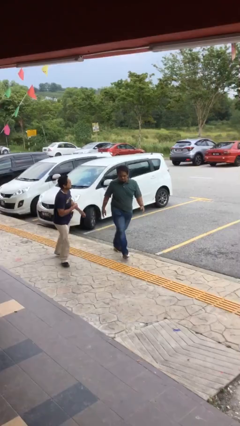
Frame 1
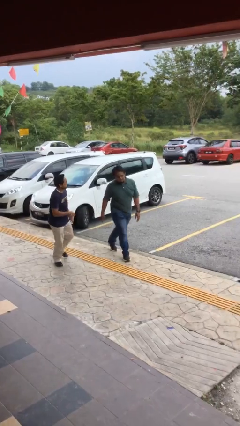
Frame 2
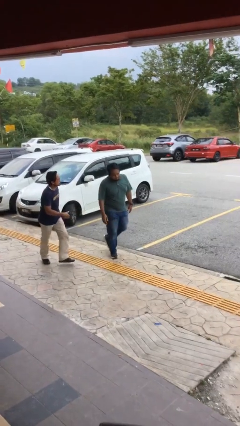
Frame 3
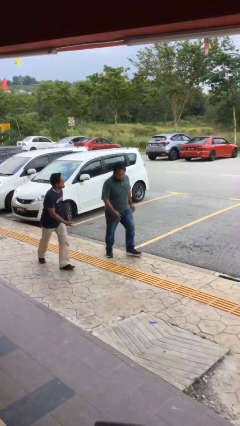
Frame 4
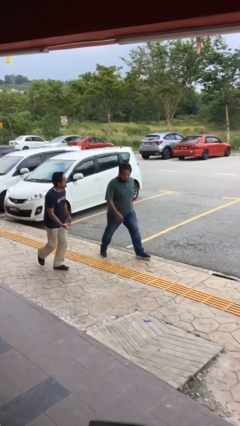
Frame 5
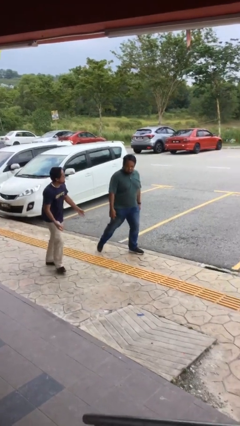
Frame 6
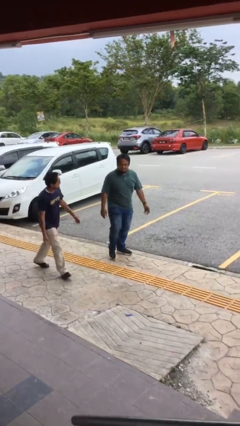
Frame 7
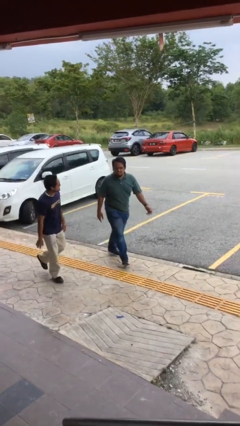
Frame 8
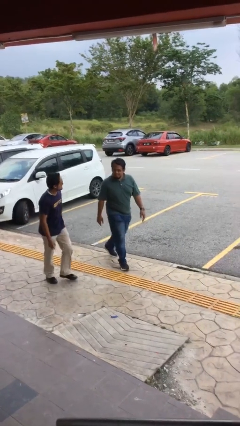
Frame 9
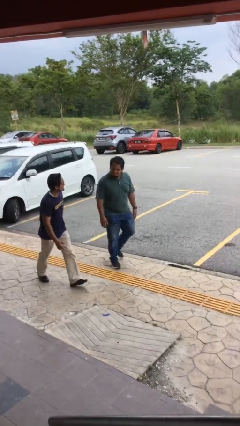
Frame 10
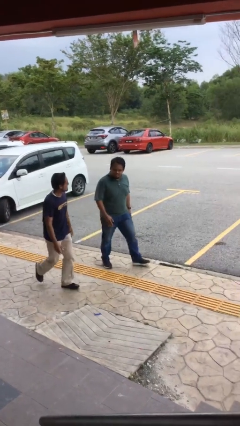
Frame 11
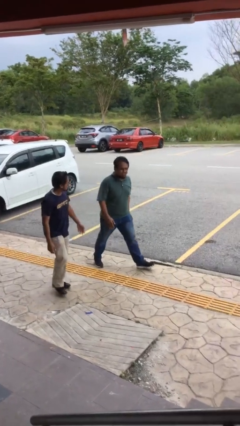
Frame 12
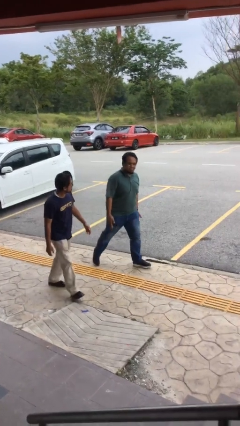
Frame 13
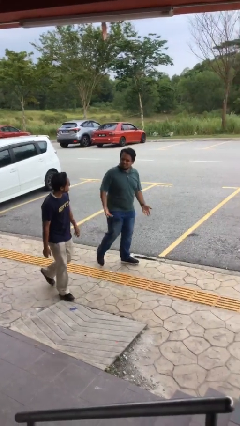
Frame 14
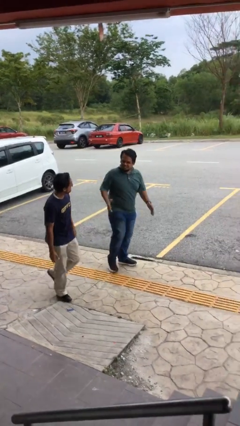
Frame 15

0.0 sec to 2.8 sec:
person talks to person

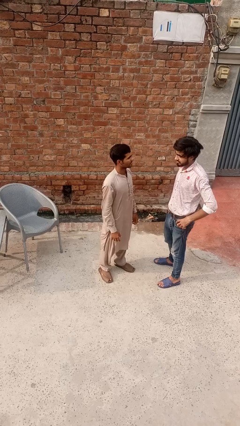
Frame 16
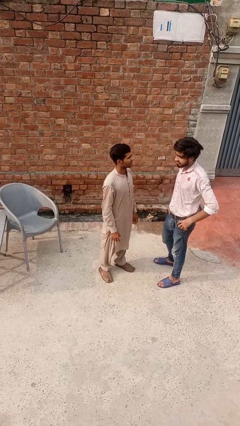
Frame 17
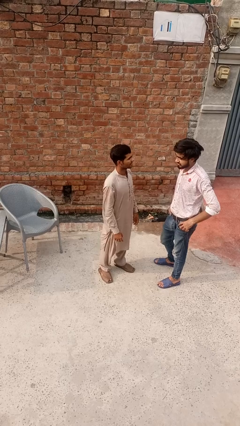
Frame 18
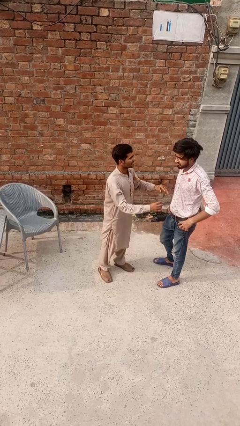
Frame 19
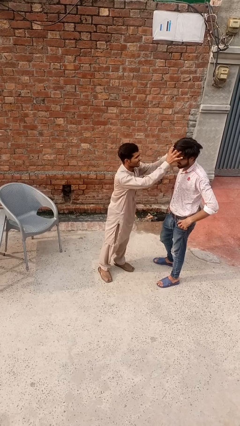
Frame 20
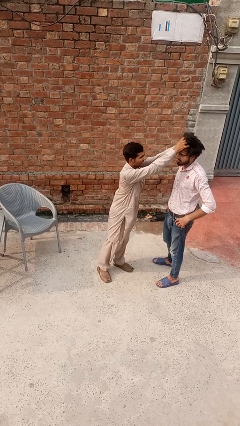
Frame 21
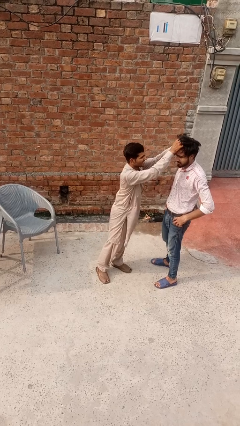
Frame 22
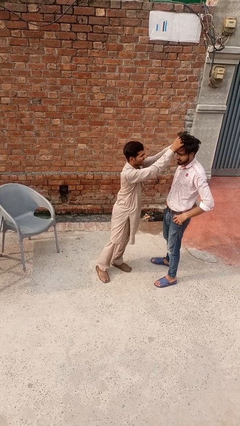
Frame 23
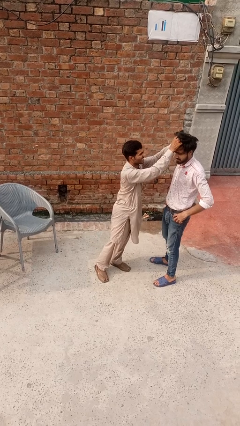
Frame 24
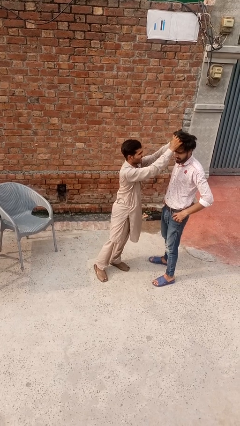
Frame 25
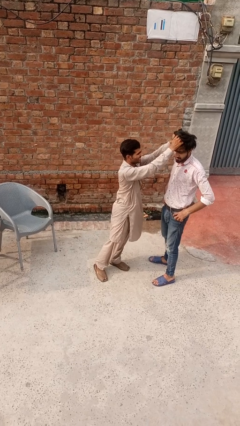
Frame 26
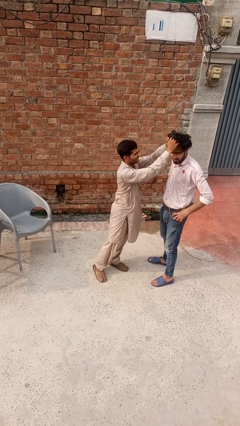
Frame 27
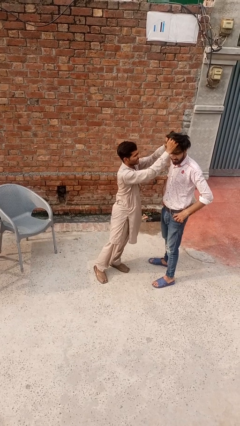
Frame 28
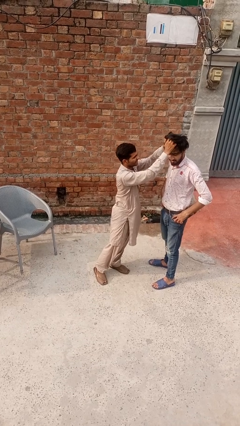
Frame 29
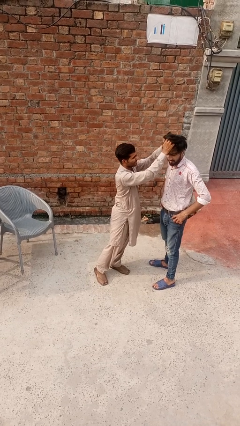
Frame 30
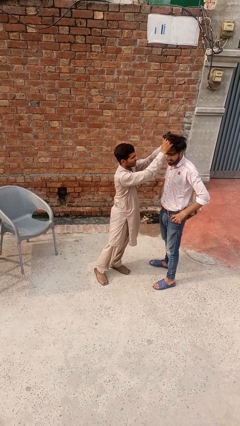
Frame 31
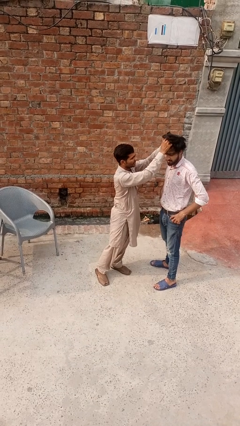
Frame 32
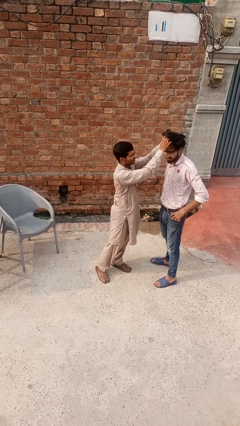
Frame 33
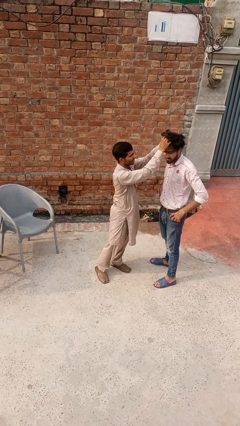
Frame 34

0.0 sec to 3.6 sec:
person grabs person by hair

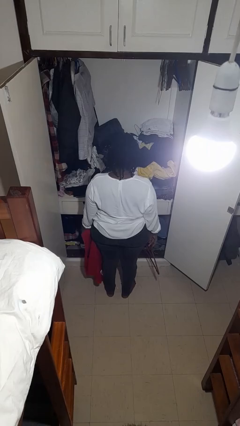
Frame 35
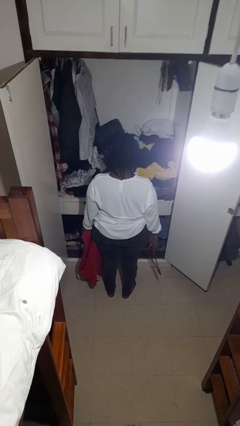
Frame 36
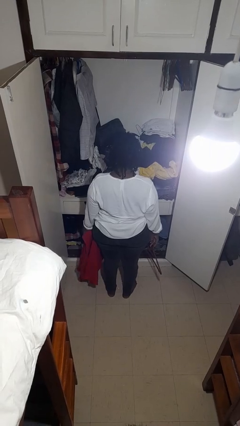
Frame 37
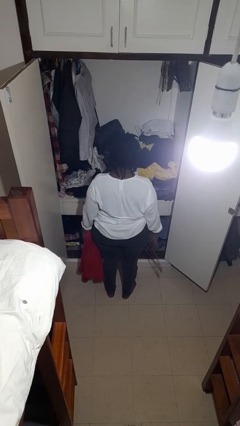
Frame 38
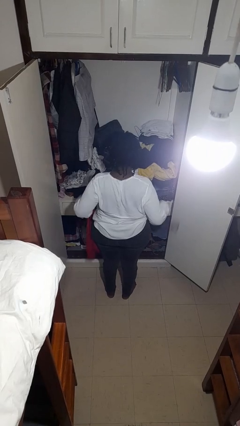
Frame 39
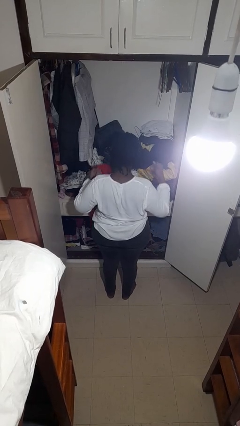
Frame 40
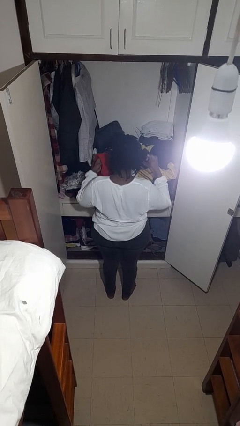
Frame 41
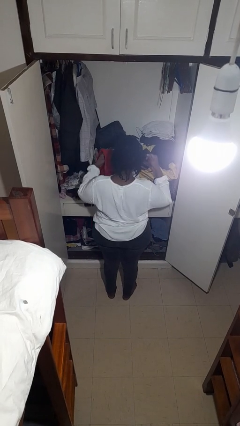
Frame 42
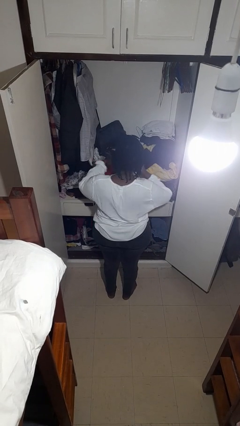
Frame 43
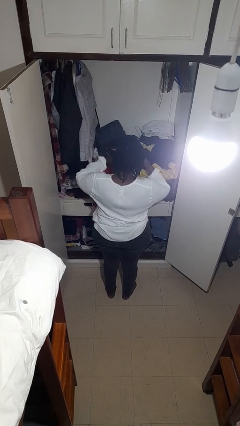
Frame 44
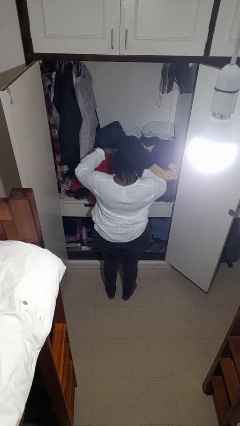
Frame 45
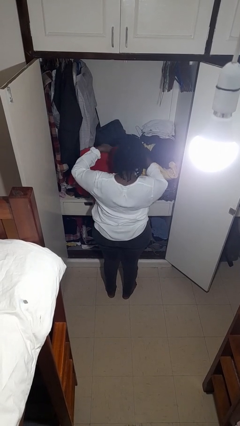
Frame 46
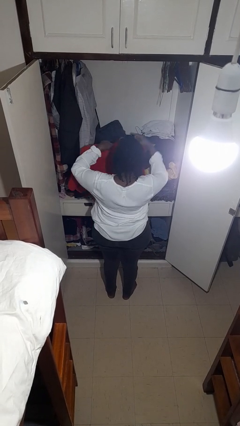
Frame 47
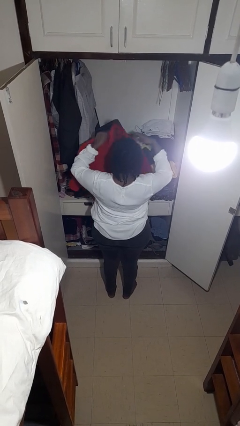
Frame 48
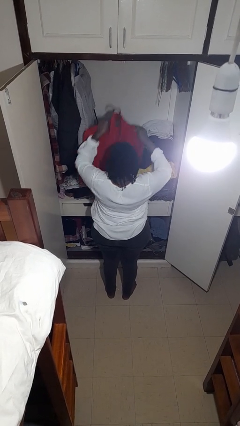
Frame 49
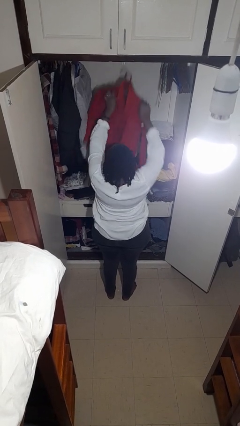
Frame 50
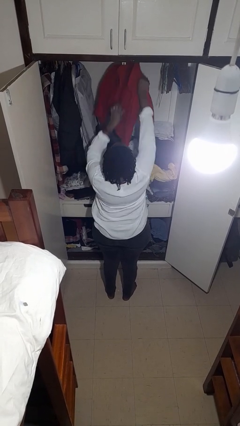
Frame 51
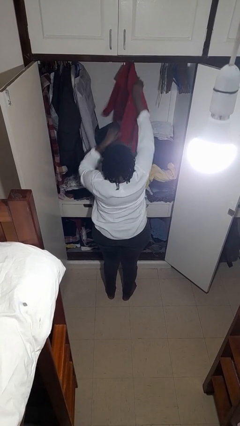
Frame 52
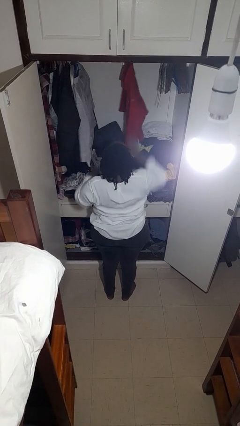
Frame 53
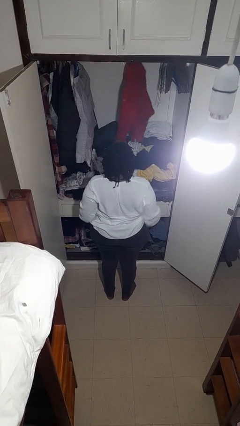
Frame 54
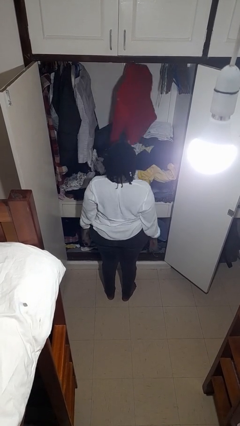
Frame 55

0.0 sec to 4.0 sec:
person puts clothes into closet

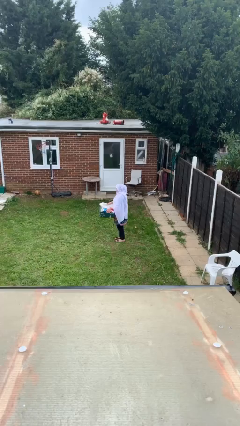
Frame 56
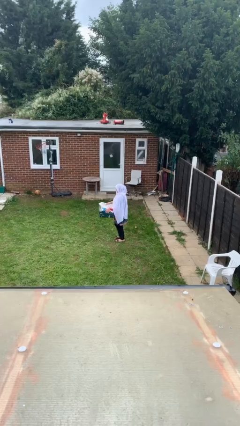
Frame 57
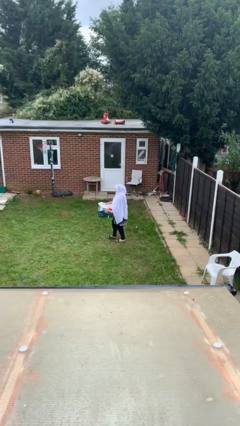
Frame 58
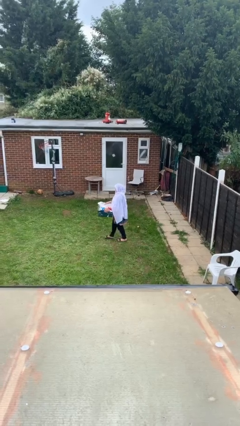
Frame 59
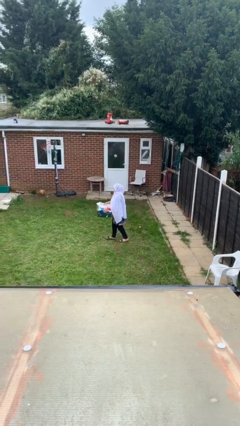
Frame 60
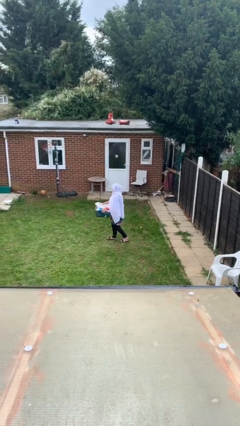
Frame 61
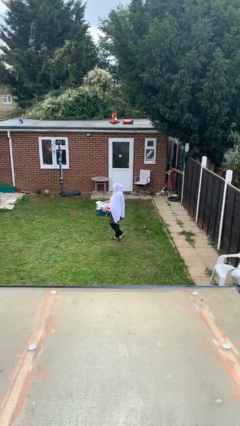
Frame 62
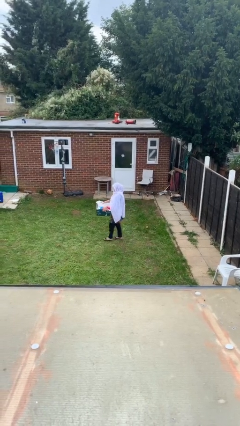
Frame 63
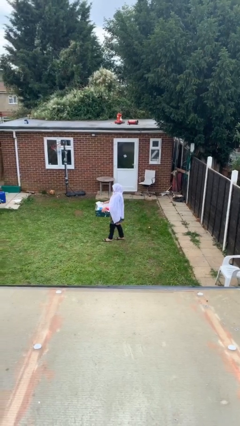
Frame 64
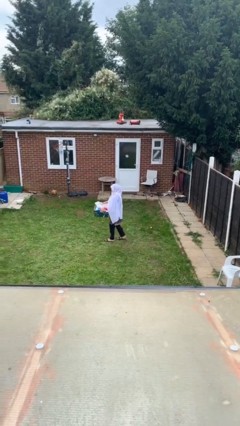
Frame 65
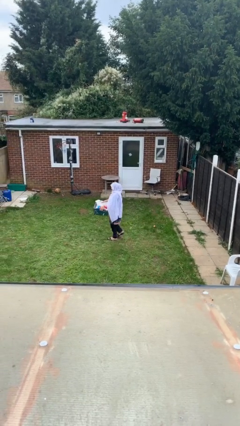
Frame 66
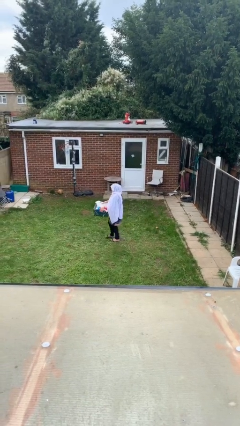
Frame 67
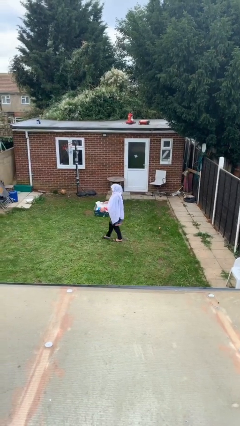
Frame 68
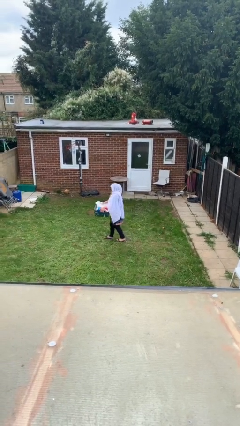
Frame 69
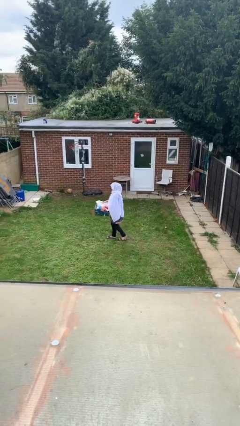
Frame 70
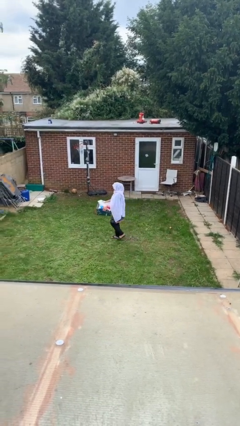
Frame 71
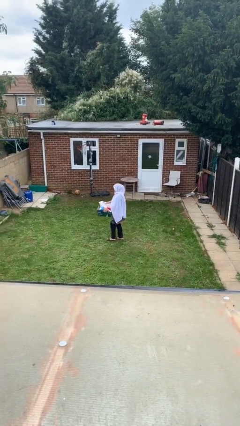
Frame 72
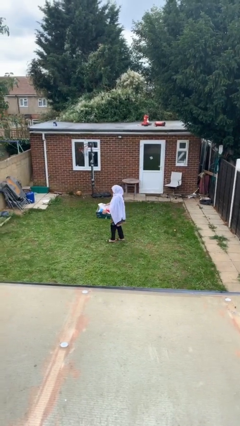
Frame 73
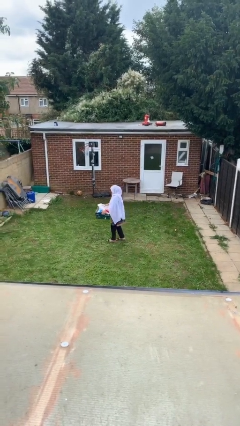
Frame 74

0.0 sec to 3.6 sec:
person carries heavy object

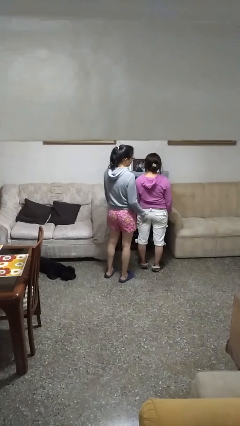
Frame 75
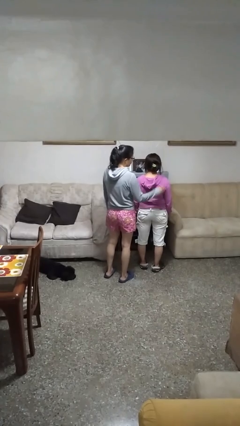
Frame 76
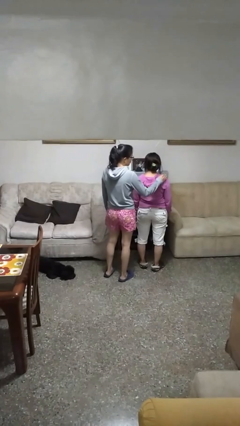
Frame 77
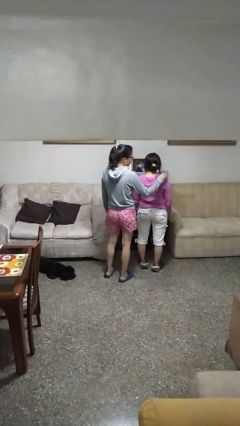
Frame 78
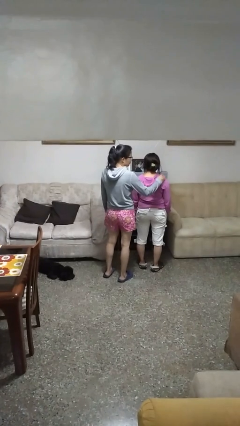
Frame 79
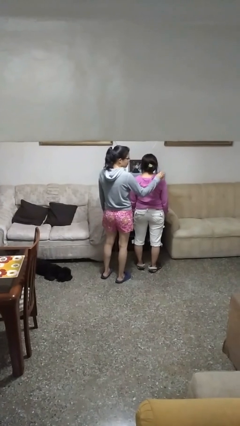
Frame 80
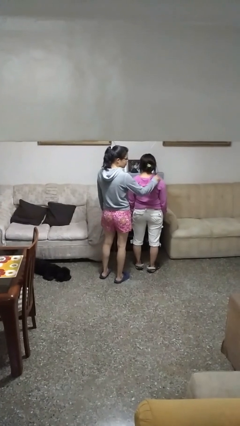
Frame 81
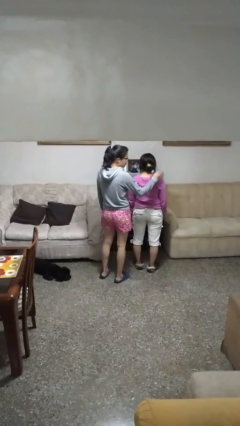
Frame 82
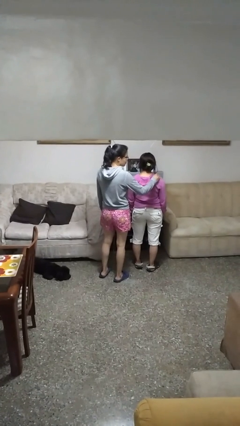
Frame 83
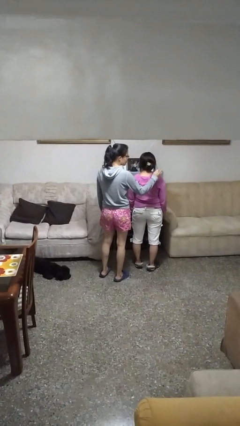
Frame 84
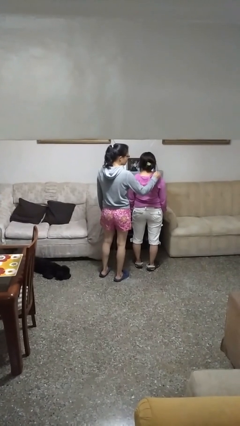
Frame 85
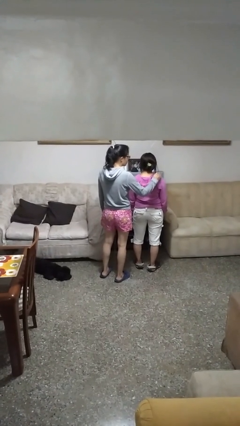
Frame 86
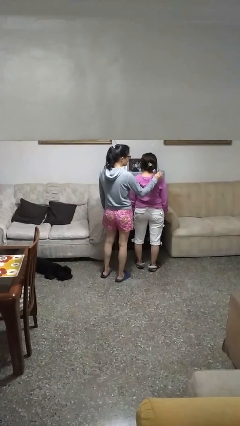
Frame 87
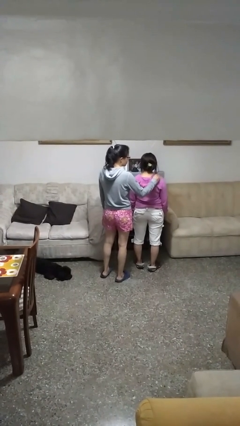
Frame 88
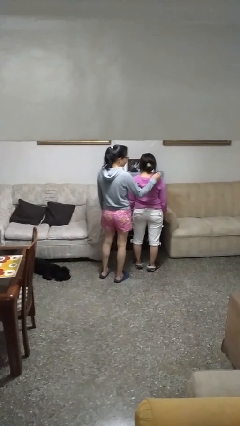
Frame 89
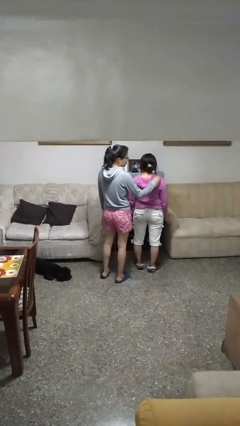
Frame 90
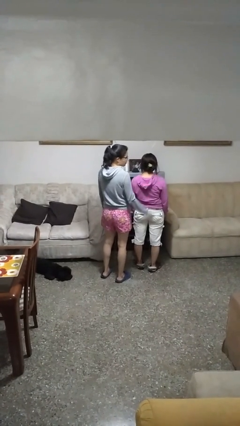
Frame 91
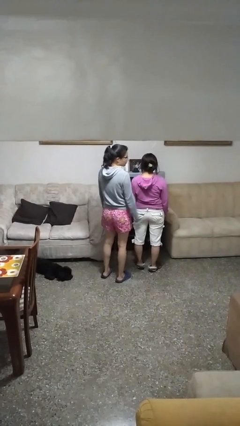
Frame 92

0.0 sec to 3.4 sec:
person touches back of person

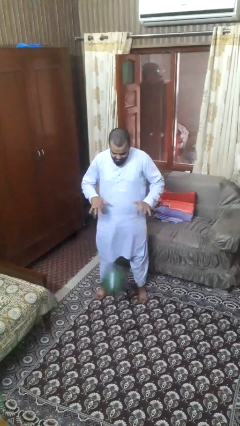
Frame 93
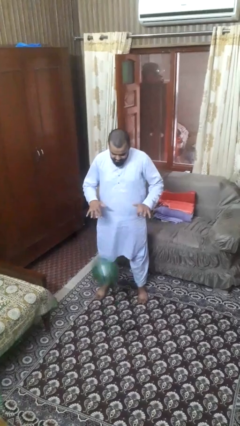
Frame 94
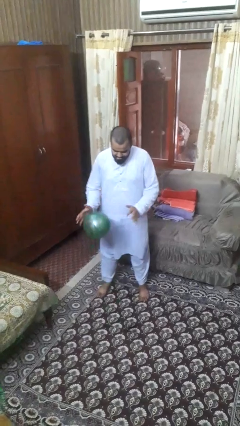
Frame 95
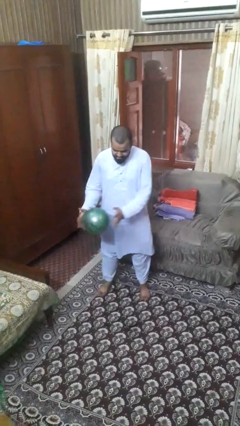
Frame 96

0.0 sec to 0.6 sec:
person bounces ball on floor
